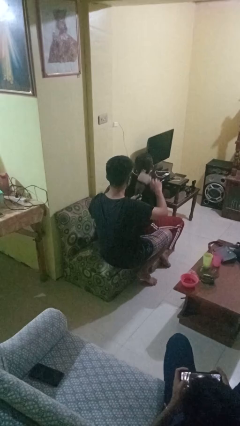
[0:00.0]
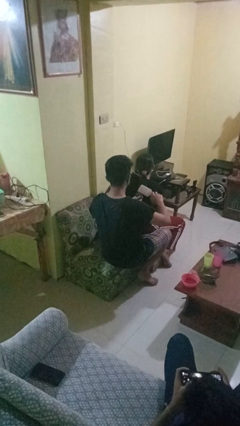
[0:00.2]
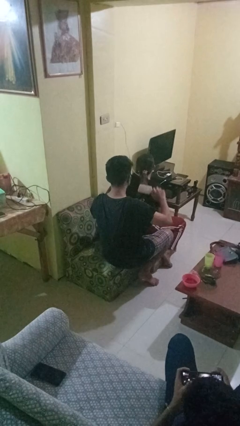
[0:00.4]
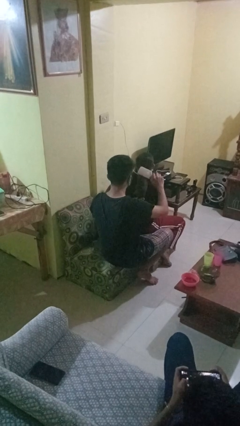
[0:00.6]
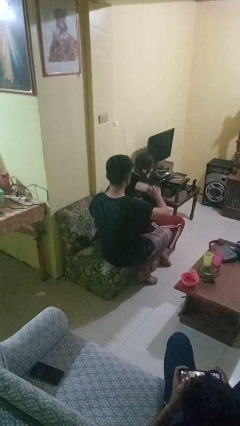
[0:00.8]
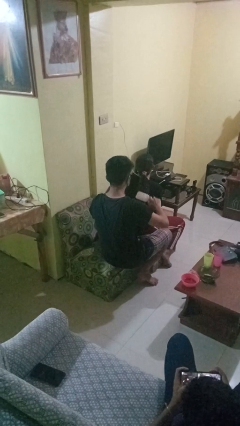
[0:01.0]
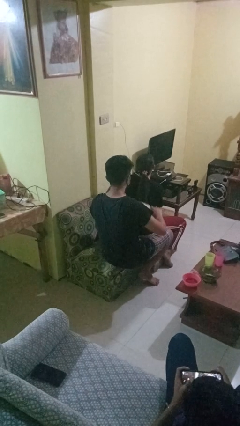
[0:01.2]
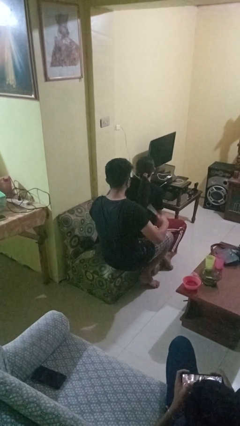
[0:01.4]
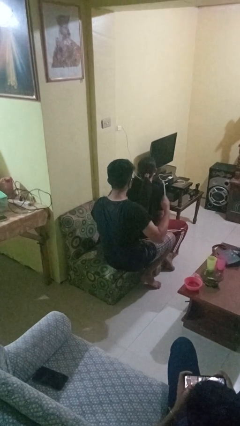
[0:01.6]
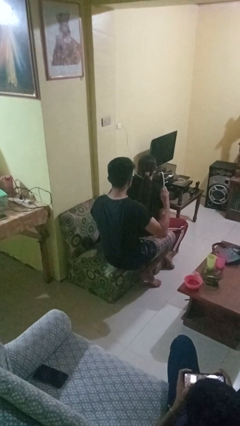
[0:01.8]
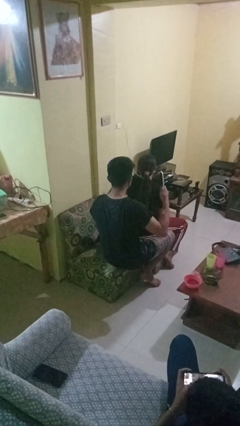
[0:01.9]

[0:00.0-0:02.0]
person brushes hair of person

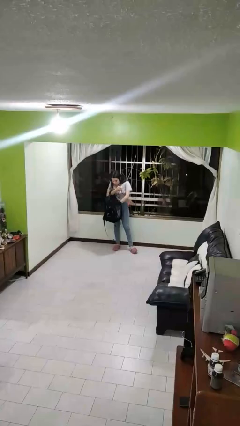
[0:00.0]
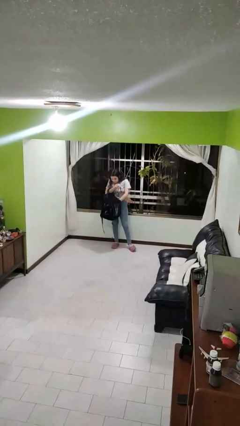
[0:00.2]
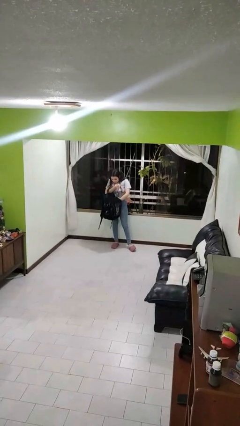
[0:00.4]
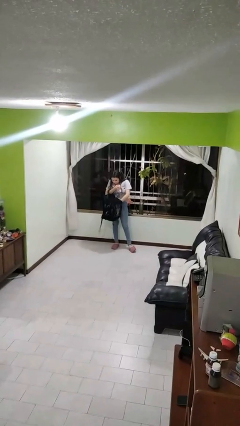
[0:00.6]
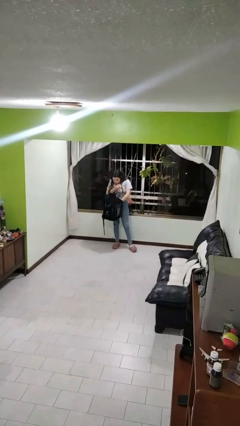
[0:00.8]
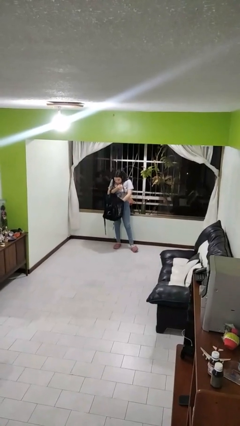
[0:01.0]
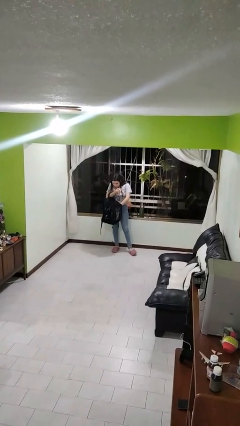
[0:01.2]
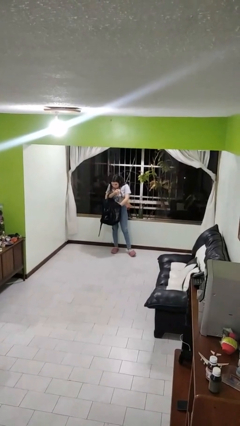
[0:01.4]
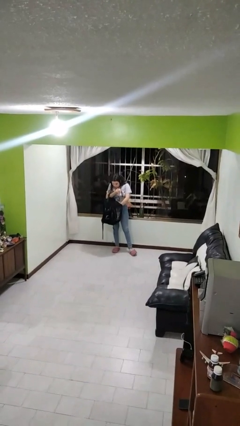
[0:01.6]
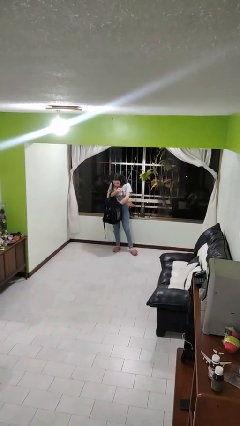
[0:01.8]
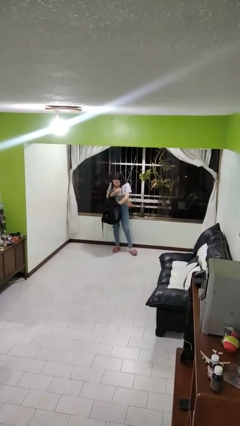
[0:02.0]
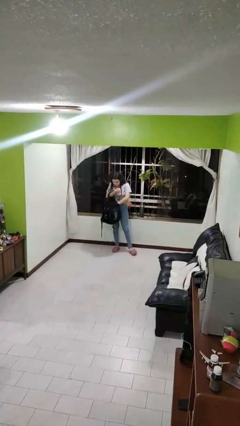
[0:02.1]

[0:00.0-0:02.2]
person searches in backpack

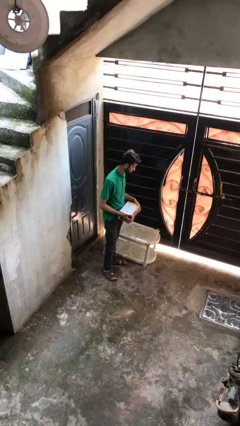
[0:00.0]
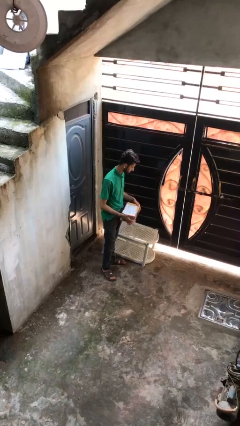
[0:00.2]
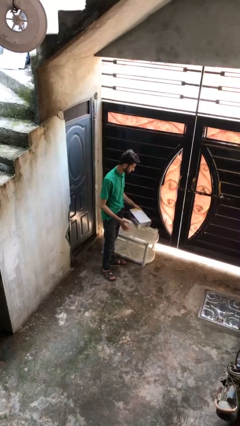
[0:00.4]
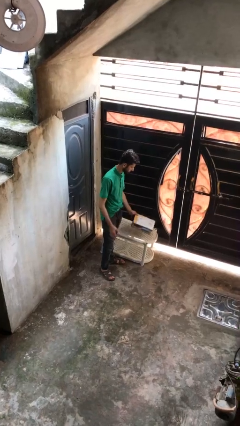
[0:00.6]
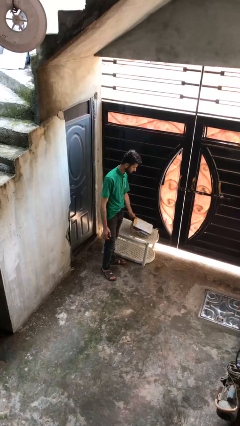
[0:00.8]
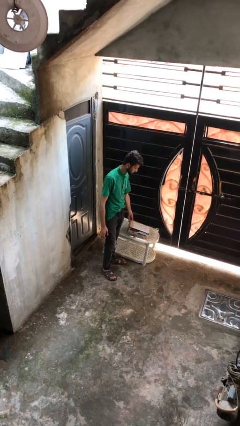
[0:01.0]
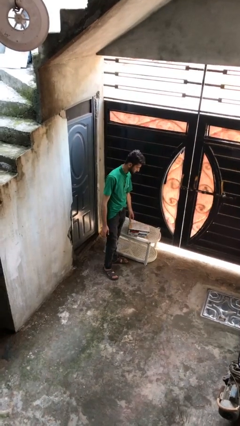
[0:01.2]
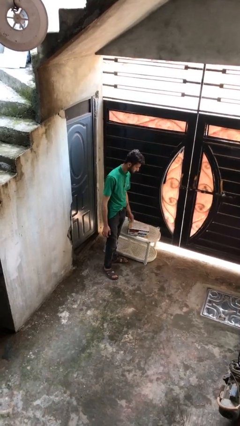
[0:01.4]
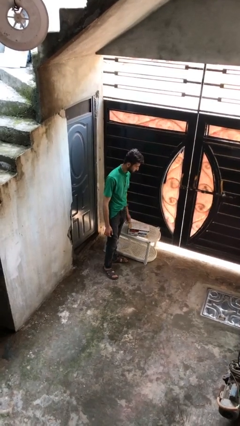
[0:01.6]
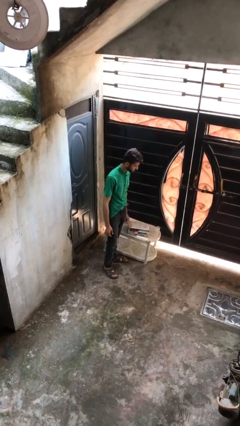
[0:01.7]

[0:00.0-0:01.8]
person puts down object on table

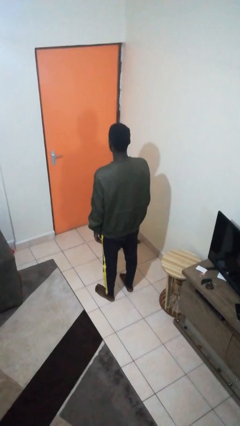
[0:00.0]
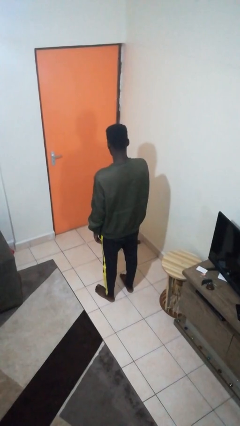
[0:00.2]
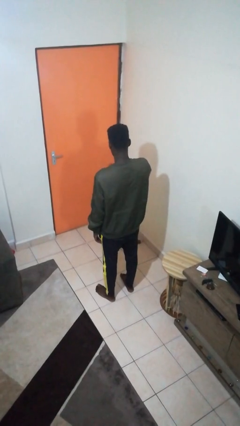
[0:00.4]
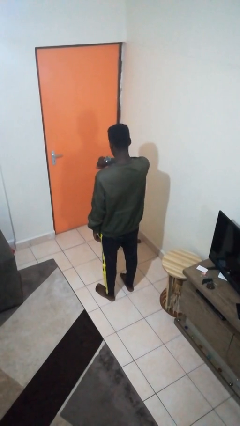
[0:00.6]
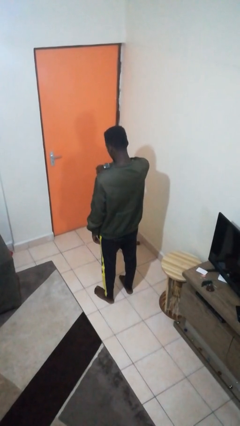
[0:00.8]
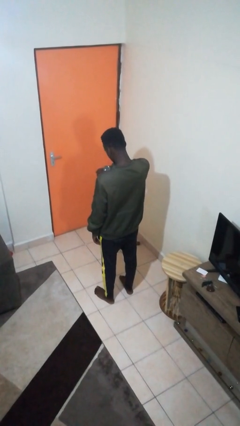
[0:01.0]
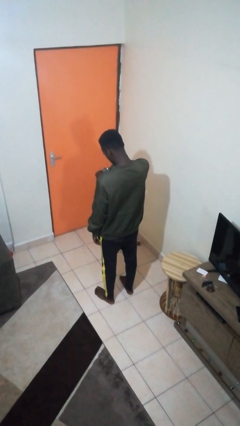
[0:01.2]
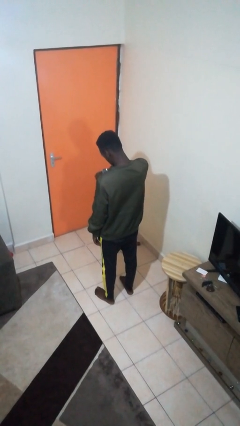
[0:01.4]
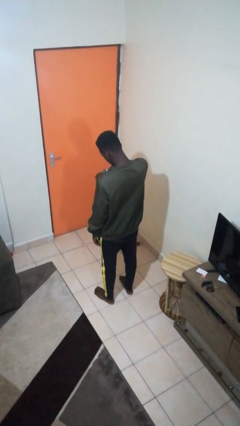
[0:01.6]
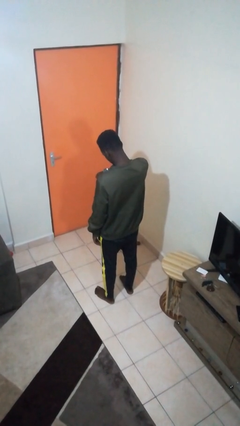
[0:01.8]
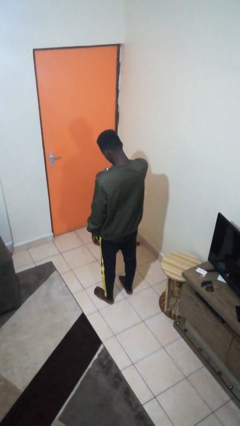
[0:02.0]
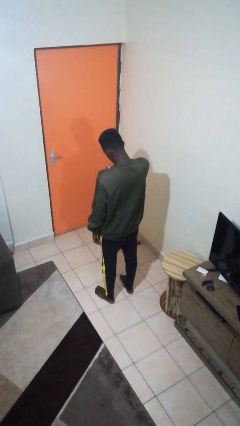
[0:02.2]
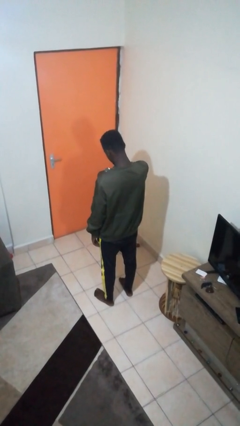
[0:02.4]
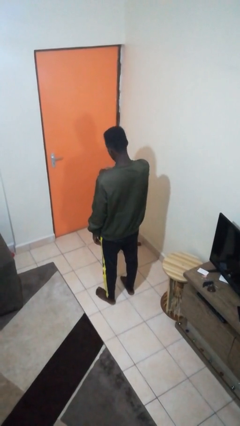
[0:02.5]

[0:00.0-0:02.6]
person looks at wristwatch

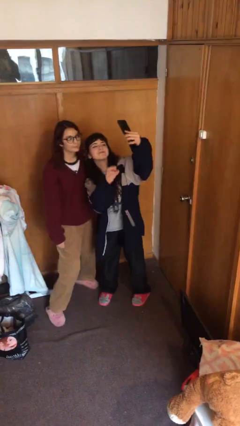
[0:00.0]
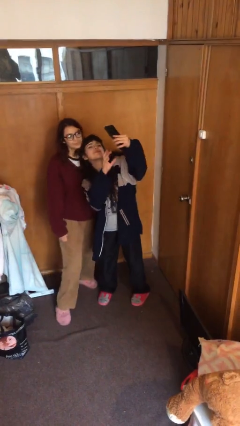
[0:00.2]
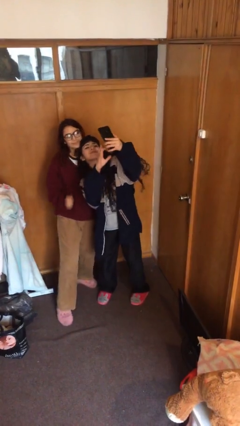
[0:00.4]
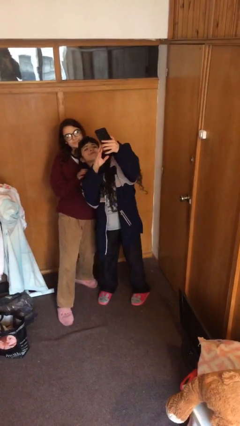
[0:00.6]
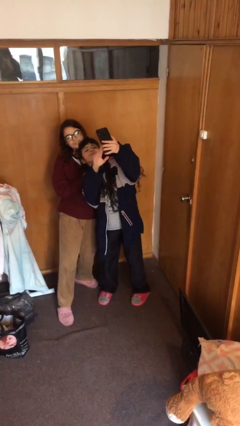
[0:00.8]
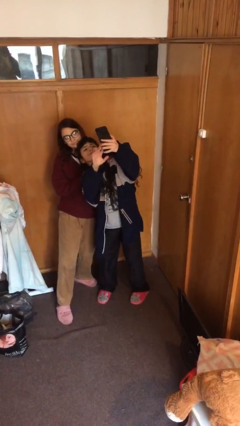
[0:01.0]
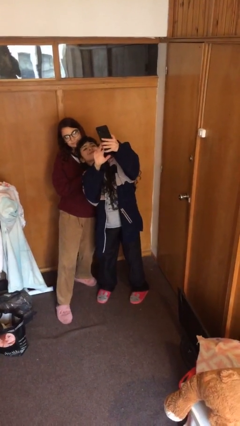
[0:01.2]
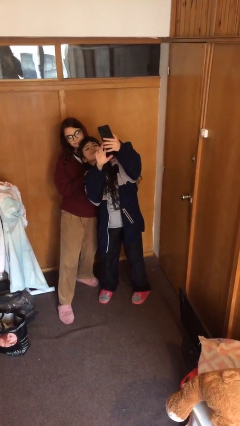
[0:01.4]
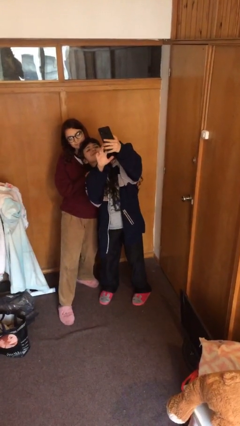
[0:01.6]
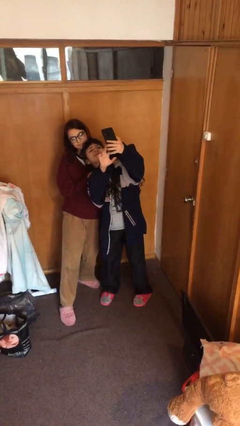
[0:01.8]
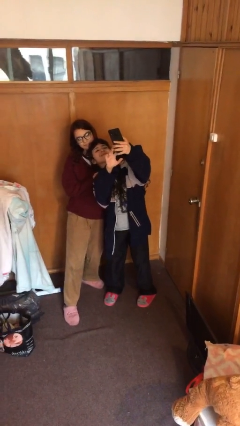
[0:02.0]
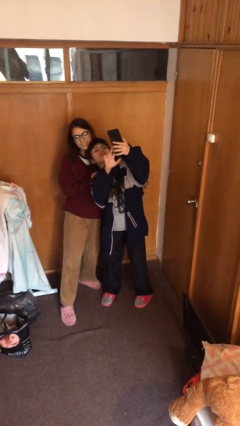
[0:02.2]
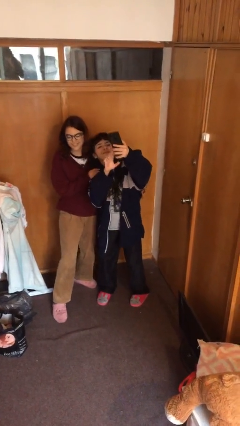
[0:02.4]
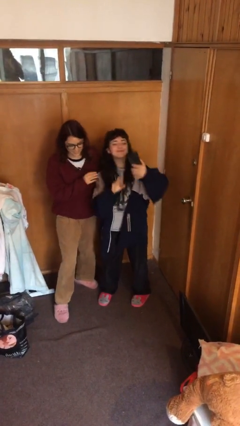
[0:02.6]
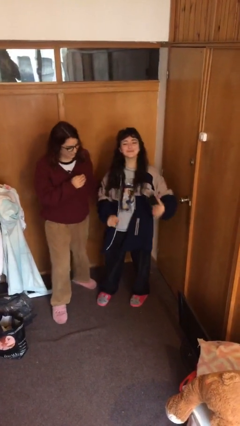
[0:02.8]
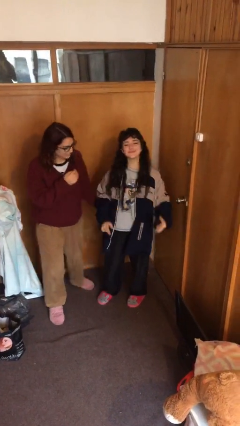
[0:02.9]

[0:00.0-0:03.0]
person takes selfie with person

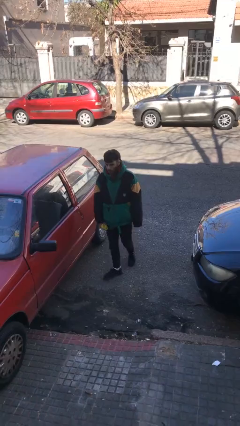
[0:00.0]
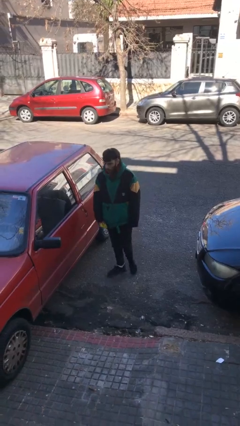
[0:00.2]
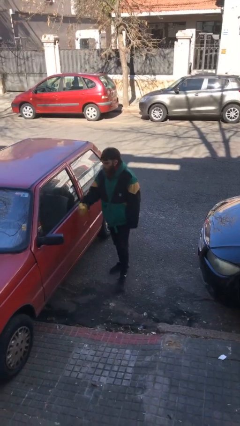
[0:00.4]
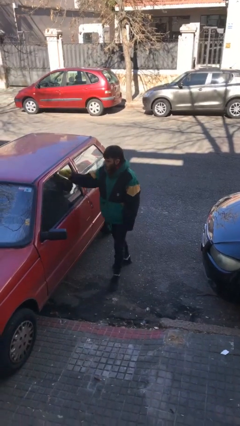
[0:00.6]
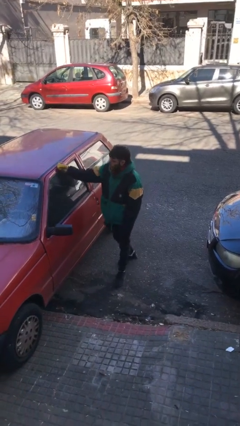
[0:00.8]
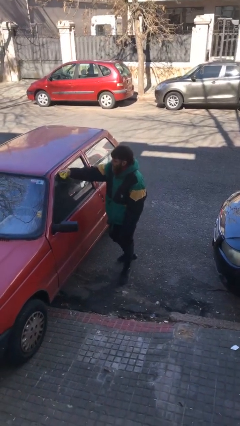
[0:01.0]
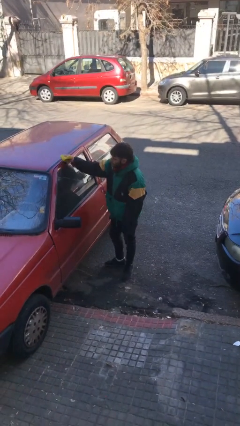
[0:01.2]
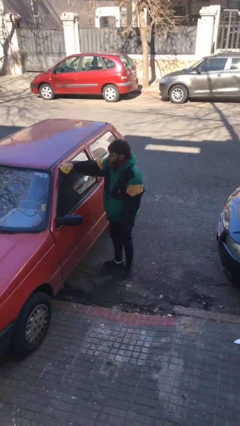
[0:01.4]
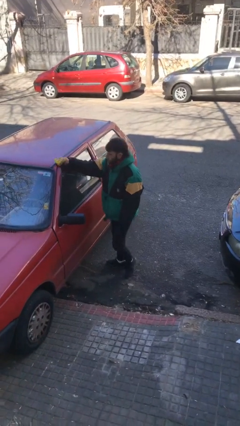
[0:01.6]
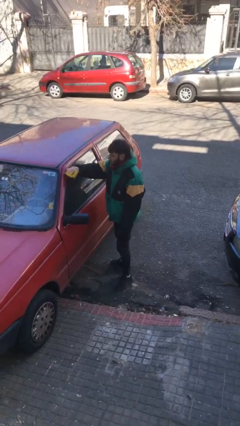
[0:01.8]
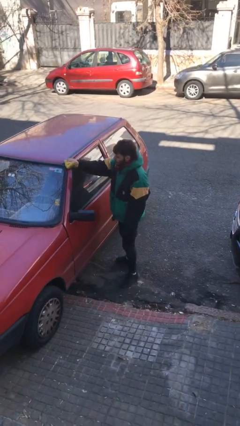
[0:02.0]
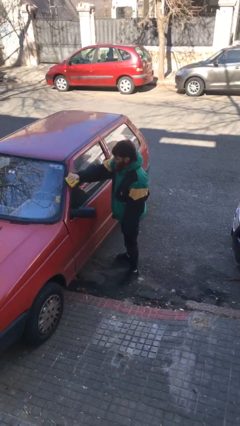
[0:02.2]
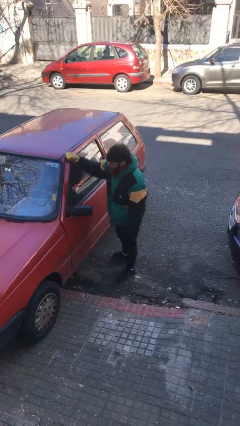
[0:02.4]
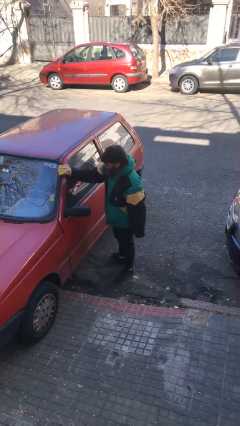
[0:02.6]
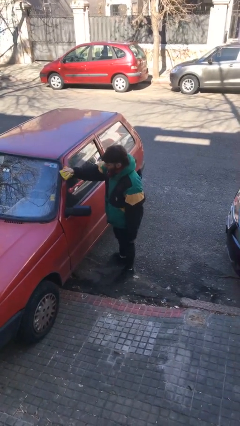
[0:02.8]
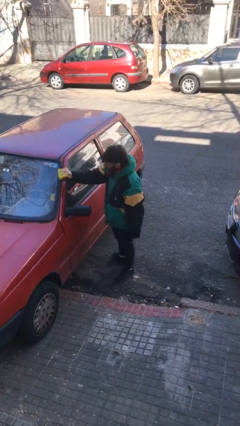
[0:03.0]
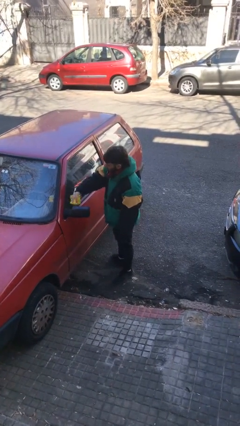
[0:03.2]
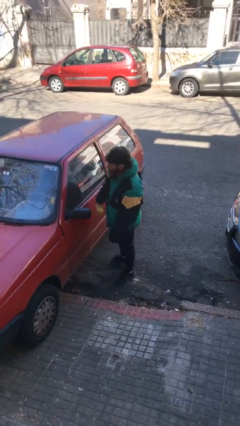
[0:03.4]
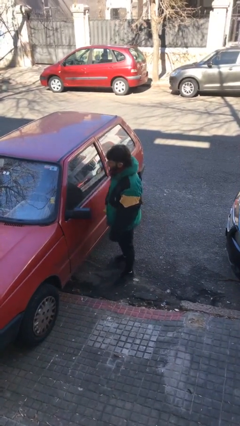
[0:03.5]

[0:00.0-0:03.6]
person polishes car with rag

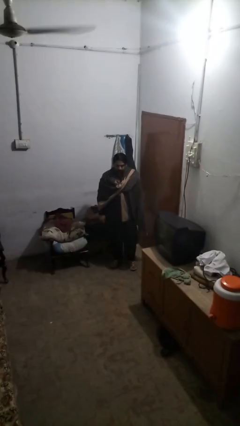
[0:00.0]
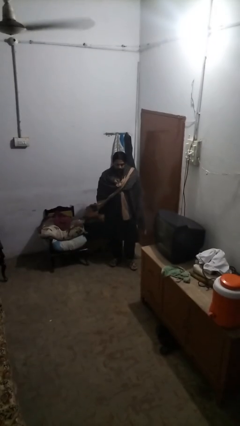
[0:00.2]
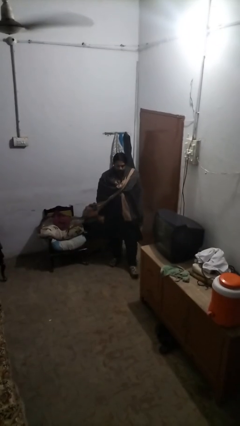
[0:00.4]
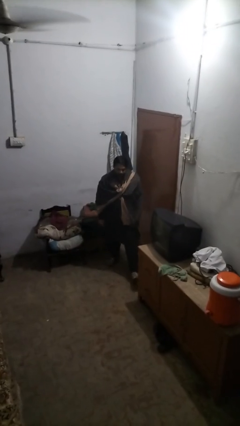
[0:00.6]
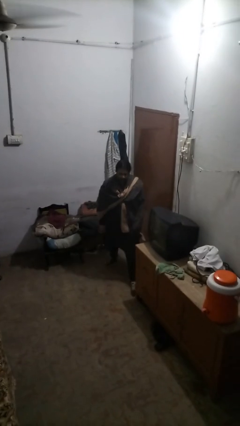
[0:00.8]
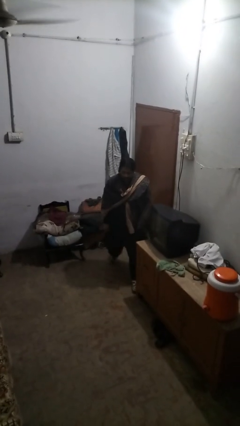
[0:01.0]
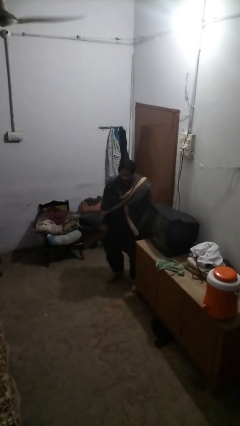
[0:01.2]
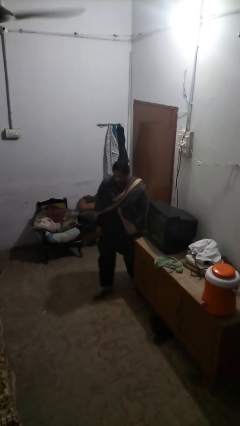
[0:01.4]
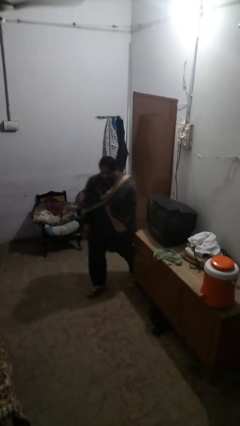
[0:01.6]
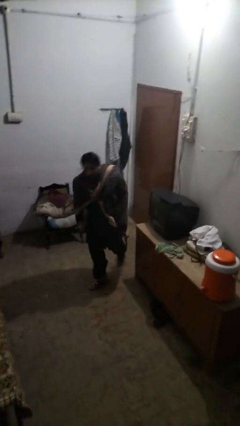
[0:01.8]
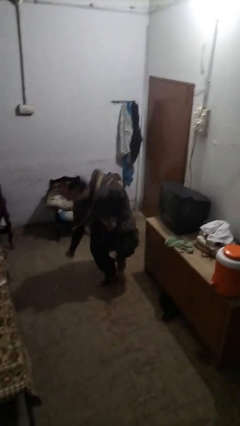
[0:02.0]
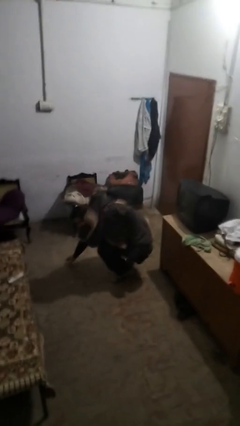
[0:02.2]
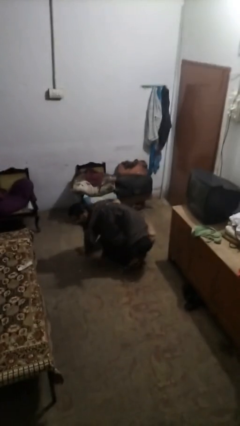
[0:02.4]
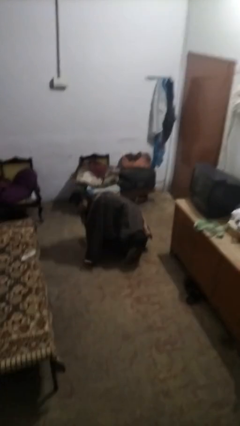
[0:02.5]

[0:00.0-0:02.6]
person trips on object on floor
